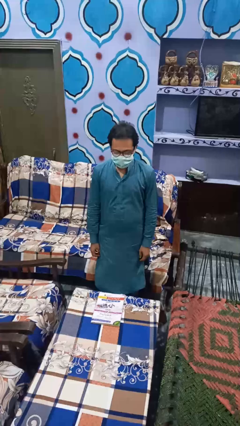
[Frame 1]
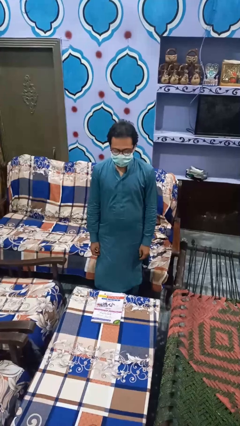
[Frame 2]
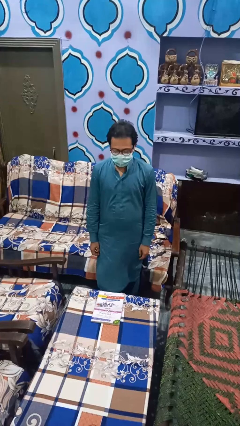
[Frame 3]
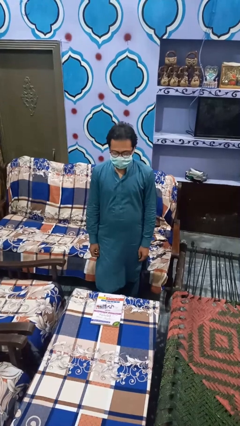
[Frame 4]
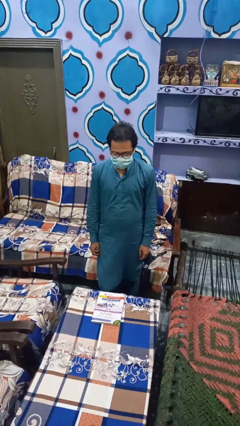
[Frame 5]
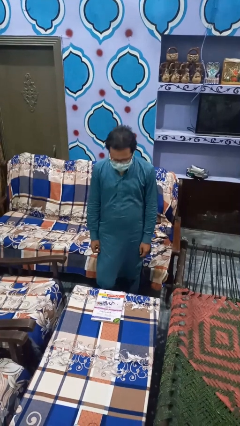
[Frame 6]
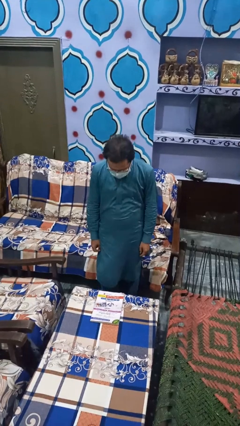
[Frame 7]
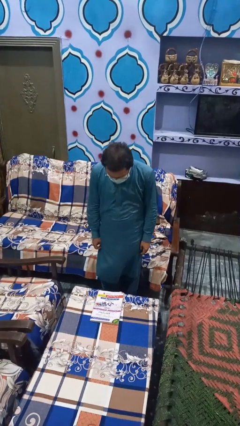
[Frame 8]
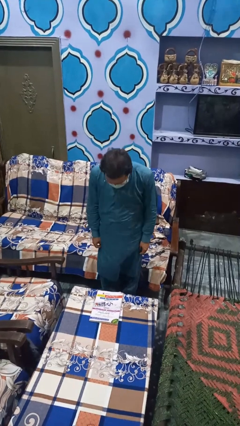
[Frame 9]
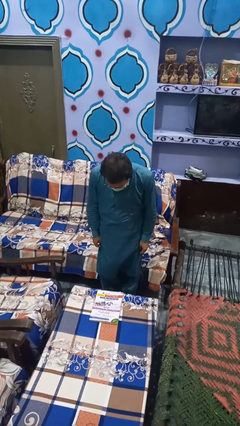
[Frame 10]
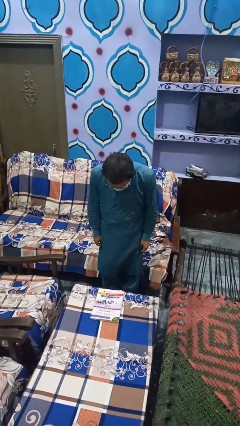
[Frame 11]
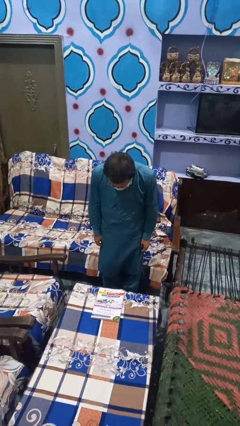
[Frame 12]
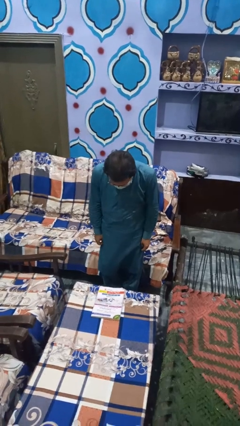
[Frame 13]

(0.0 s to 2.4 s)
person bows

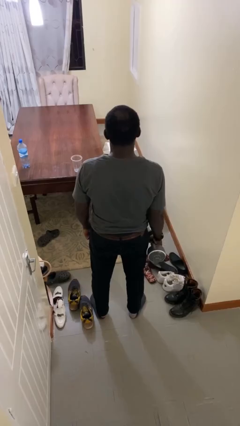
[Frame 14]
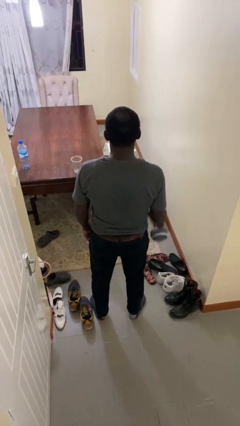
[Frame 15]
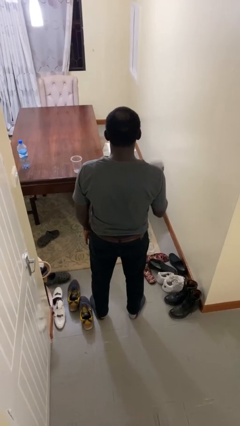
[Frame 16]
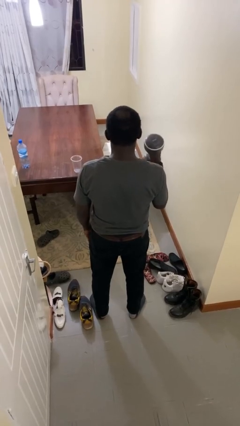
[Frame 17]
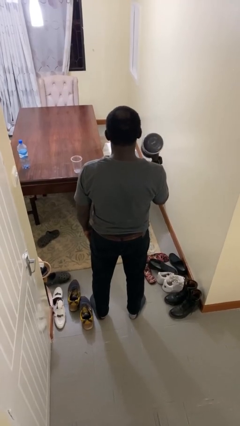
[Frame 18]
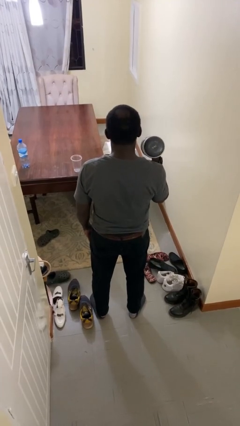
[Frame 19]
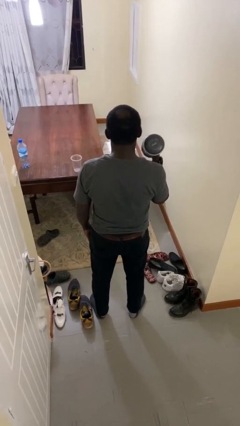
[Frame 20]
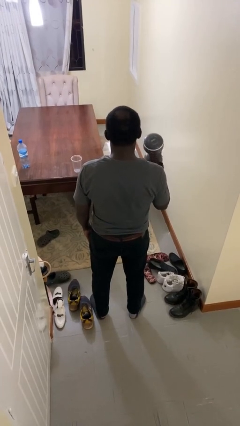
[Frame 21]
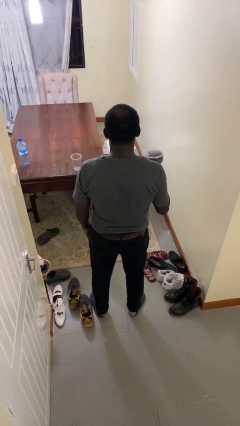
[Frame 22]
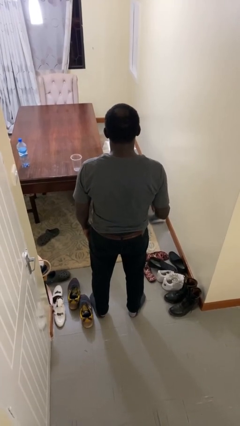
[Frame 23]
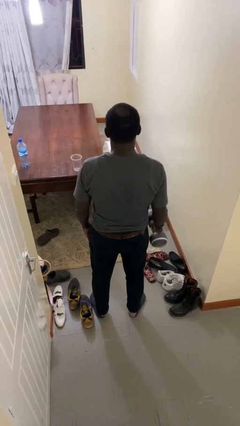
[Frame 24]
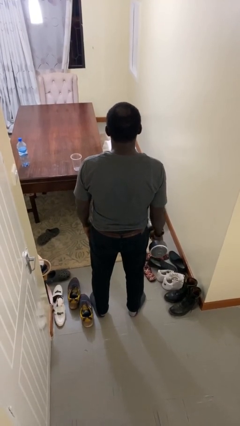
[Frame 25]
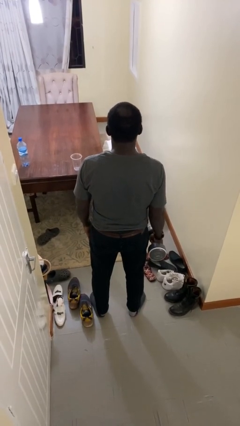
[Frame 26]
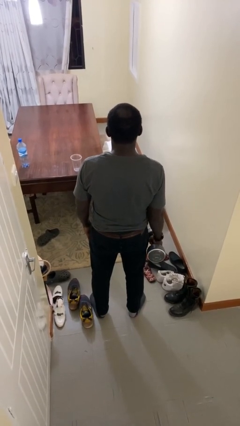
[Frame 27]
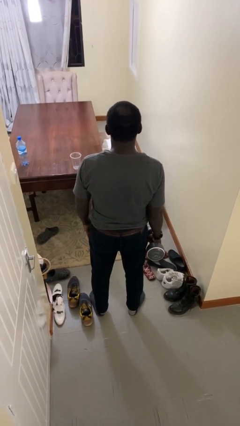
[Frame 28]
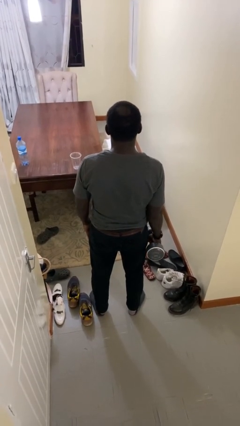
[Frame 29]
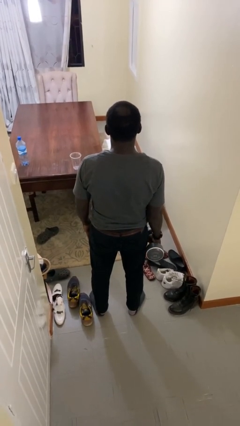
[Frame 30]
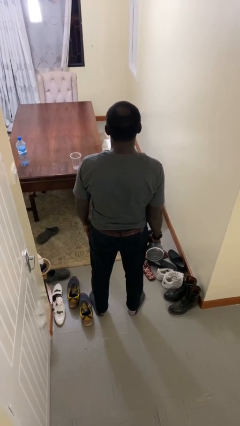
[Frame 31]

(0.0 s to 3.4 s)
person lifts dumbbells

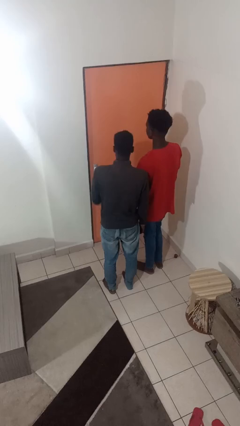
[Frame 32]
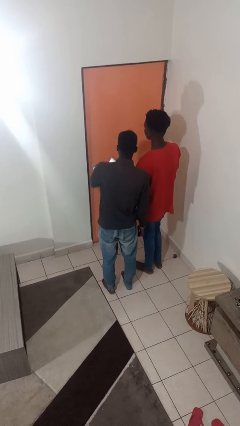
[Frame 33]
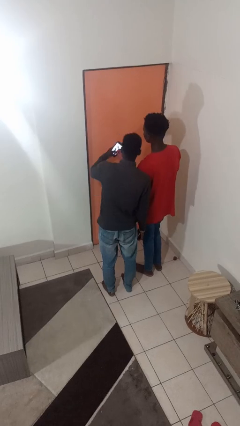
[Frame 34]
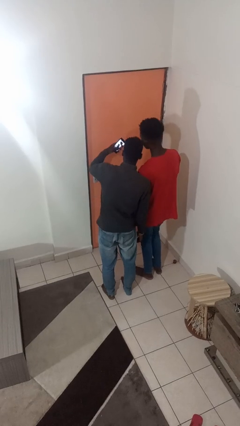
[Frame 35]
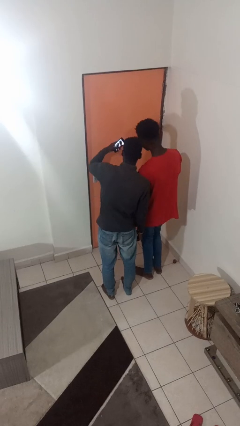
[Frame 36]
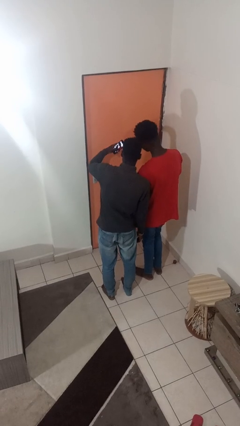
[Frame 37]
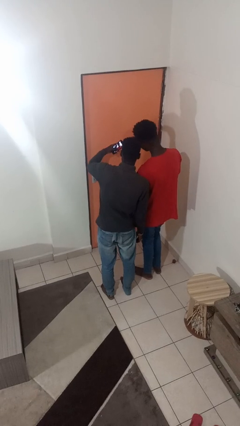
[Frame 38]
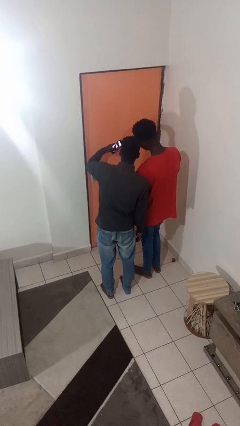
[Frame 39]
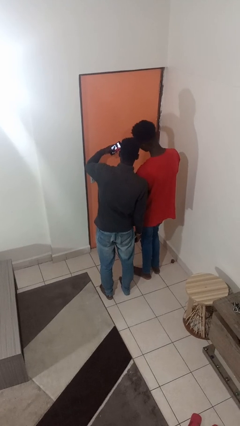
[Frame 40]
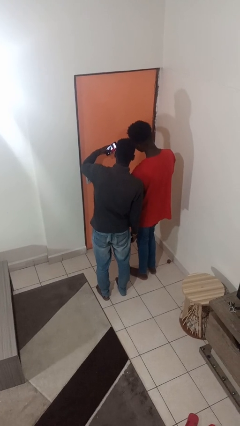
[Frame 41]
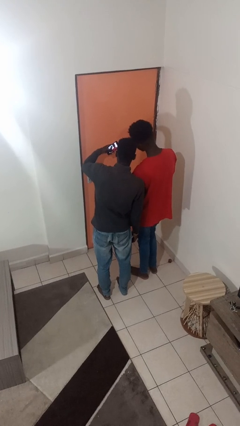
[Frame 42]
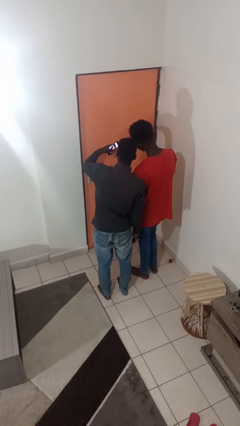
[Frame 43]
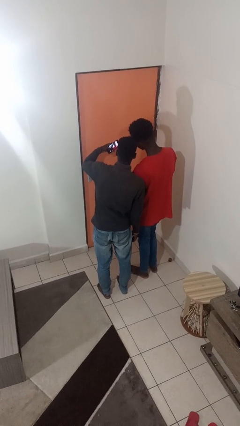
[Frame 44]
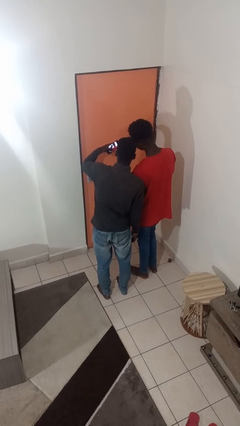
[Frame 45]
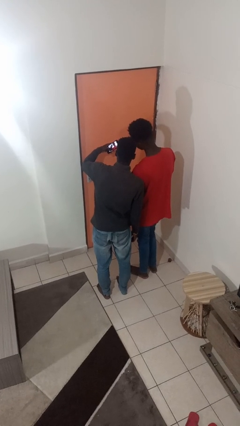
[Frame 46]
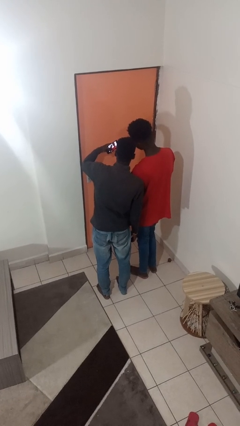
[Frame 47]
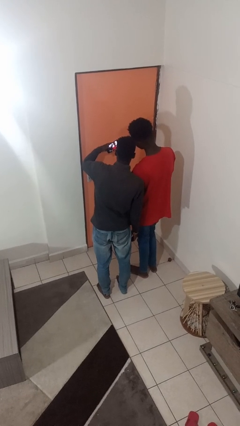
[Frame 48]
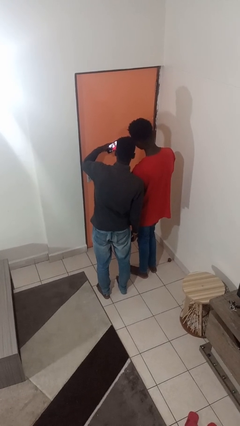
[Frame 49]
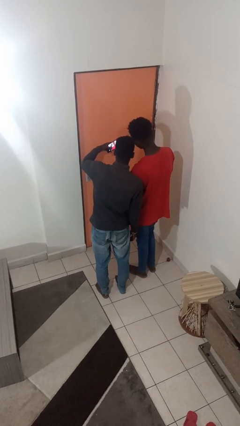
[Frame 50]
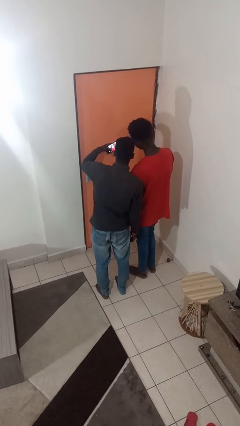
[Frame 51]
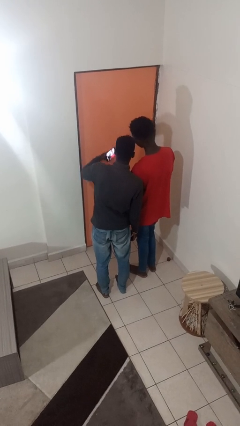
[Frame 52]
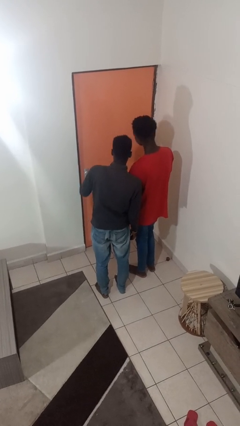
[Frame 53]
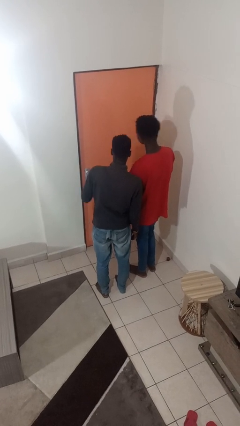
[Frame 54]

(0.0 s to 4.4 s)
person takes selfie with person

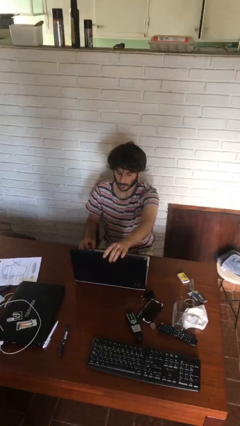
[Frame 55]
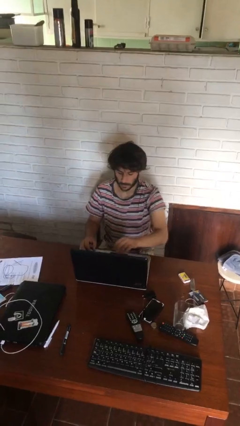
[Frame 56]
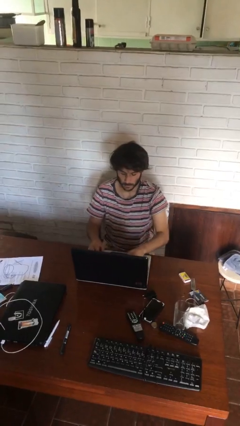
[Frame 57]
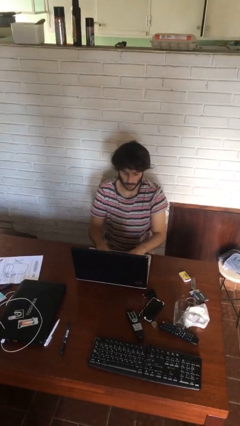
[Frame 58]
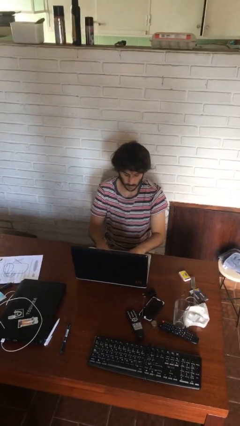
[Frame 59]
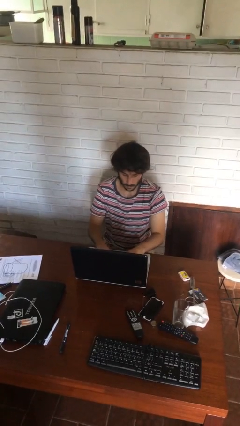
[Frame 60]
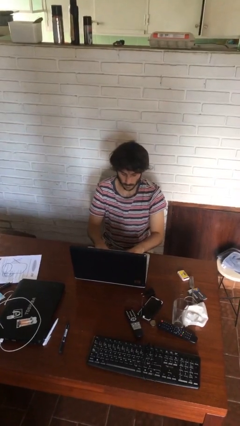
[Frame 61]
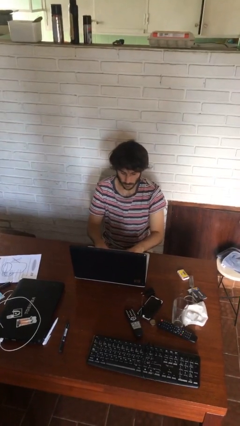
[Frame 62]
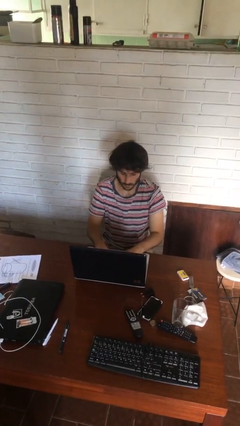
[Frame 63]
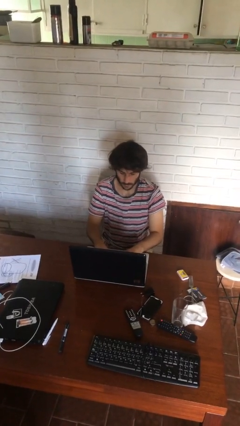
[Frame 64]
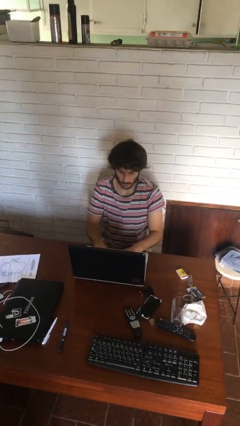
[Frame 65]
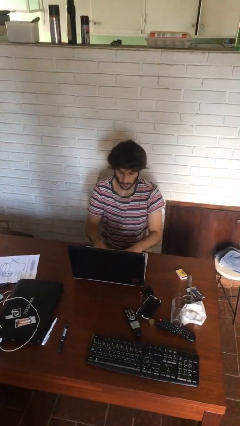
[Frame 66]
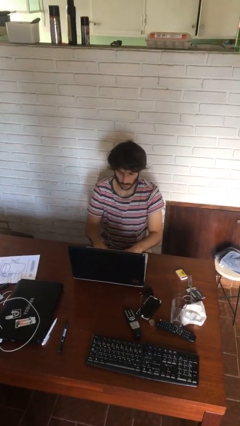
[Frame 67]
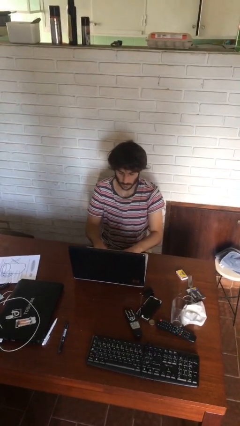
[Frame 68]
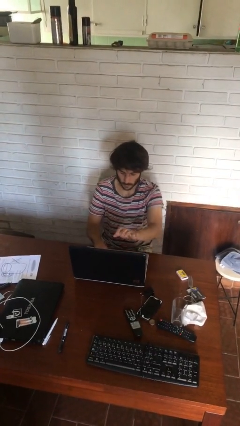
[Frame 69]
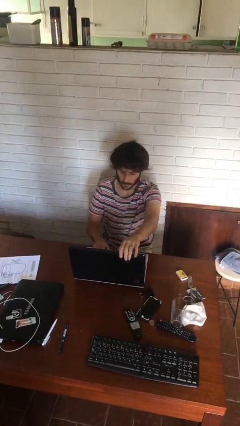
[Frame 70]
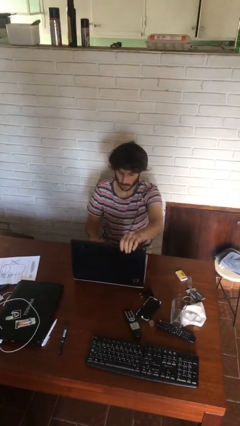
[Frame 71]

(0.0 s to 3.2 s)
person interacts with laptop

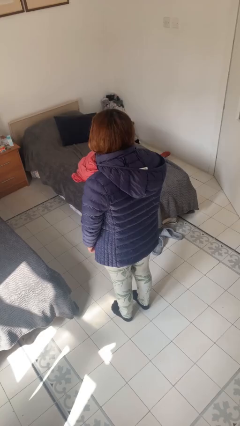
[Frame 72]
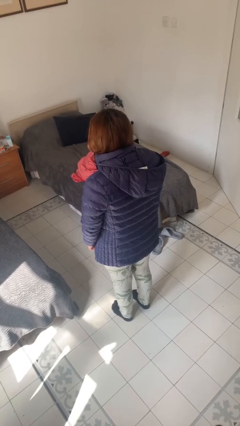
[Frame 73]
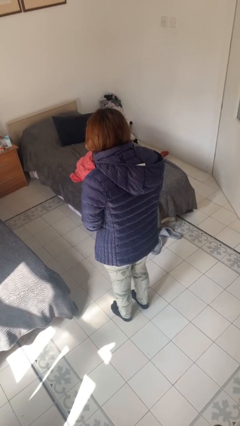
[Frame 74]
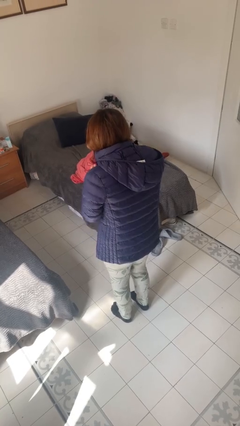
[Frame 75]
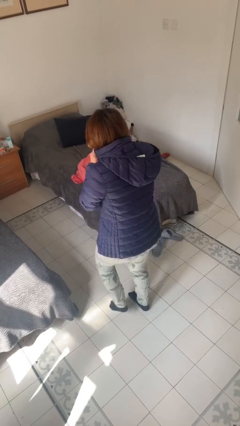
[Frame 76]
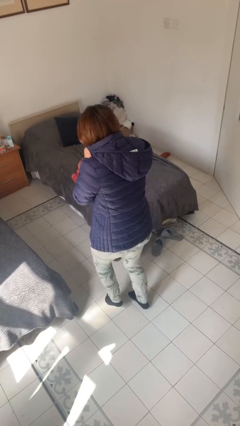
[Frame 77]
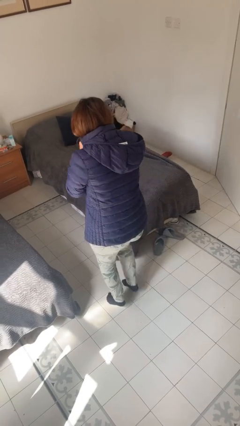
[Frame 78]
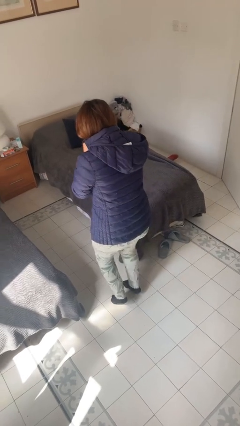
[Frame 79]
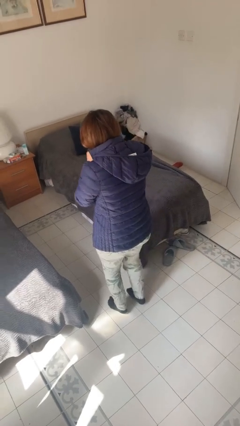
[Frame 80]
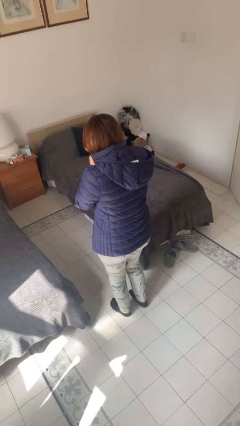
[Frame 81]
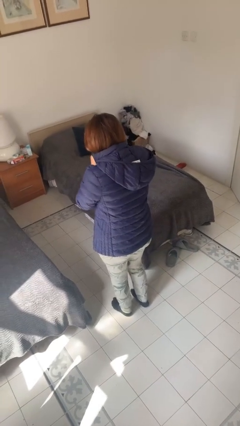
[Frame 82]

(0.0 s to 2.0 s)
person walks tiptoe

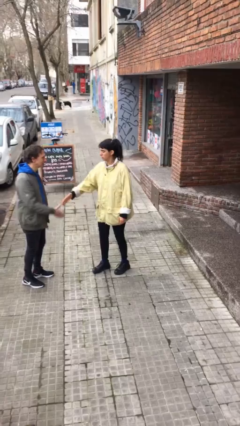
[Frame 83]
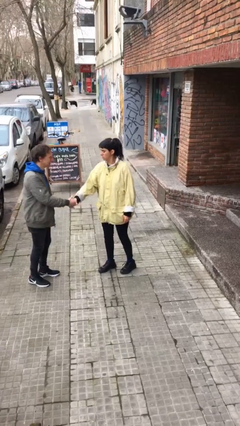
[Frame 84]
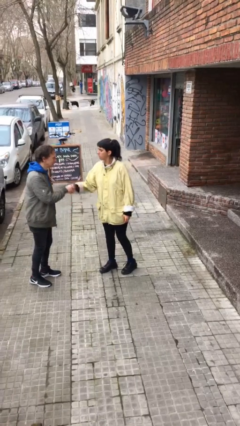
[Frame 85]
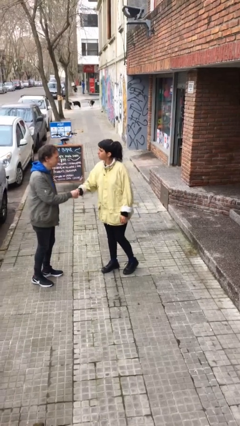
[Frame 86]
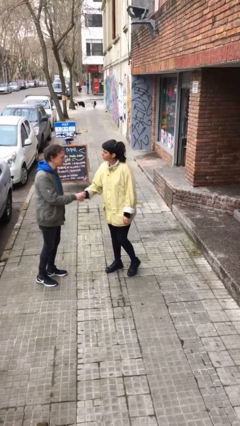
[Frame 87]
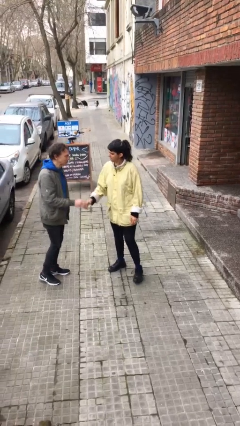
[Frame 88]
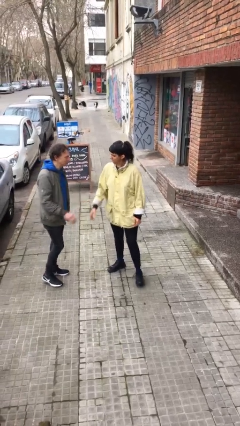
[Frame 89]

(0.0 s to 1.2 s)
person shakes hand

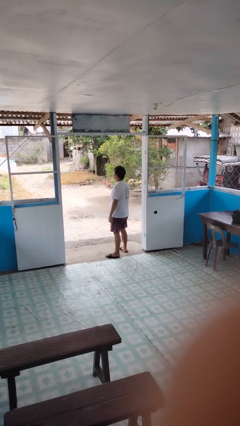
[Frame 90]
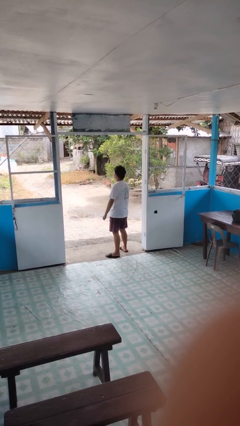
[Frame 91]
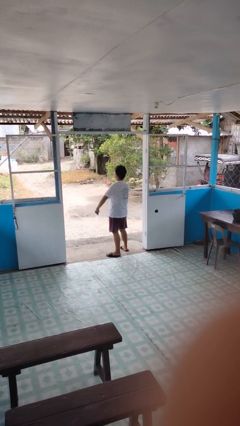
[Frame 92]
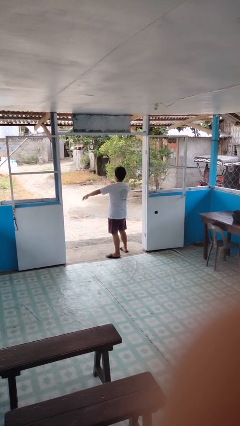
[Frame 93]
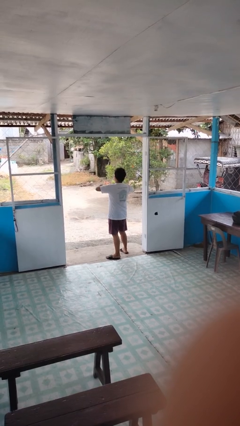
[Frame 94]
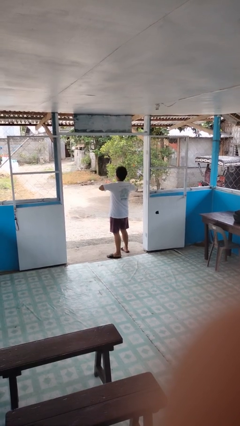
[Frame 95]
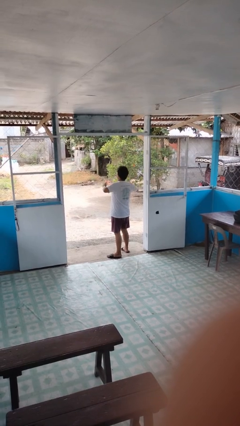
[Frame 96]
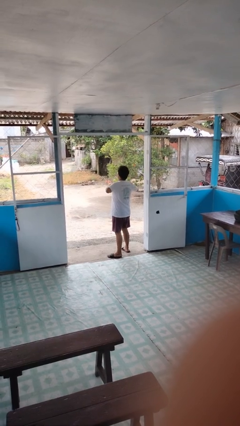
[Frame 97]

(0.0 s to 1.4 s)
person drums on chest
